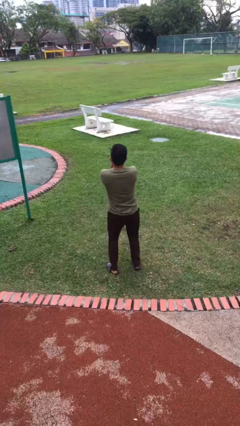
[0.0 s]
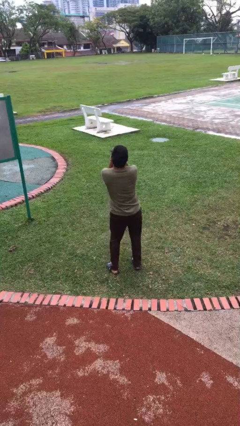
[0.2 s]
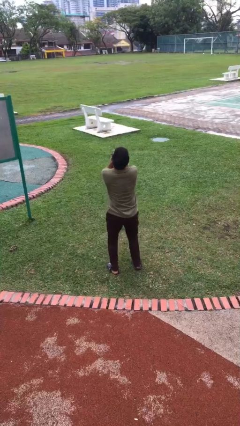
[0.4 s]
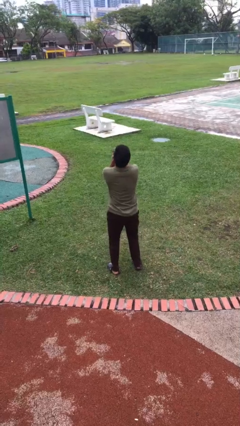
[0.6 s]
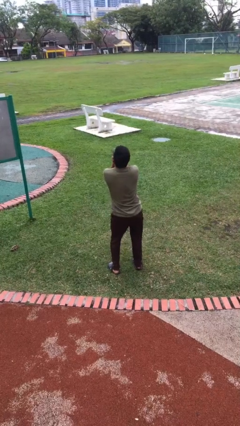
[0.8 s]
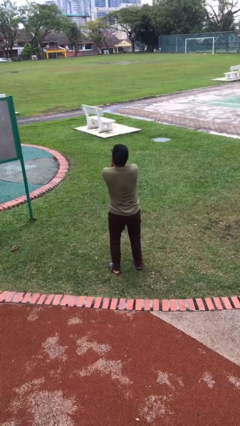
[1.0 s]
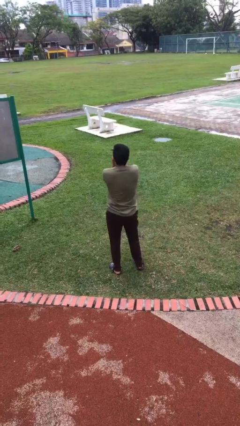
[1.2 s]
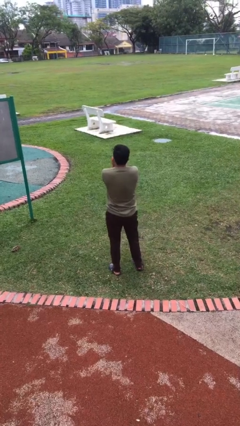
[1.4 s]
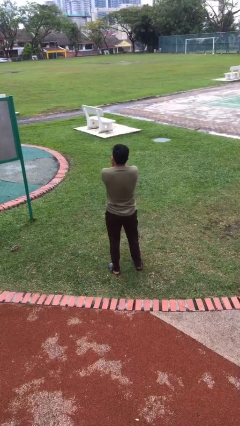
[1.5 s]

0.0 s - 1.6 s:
person wiggles hips

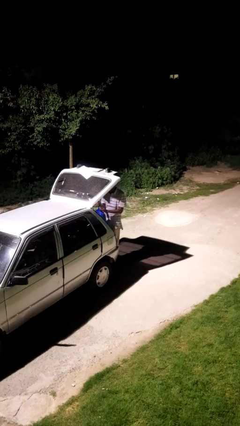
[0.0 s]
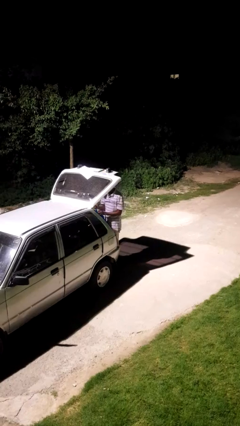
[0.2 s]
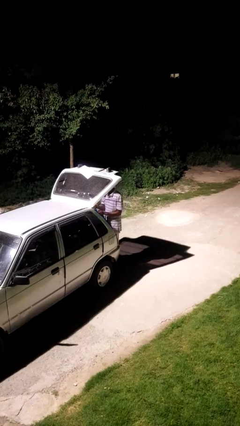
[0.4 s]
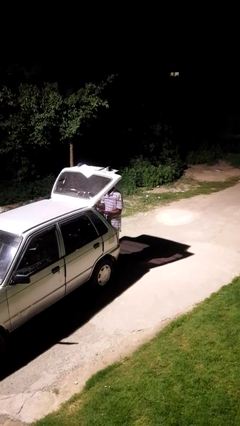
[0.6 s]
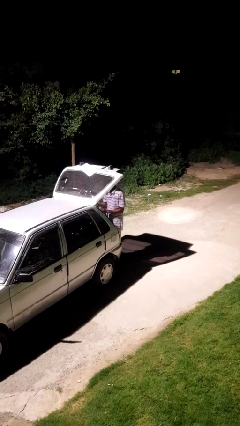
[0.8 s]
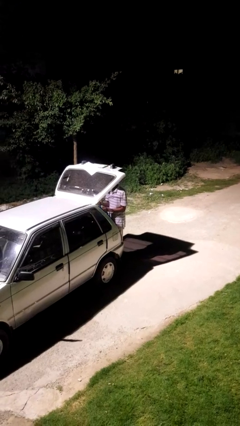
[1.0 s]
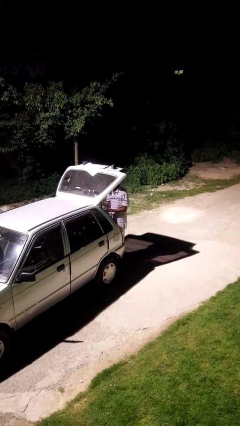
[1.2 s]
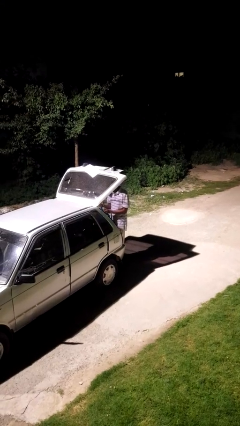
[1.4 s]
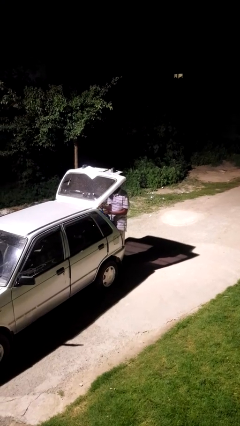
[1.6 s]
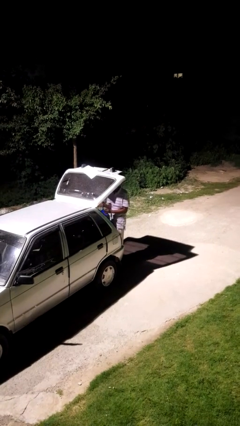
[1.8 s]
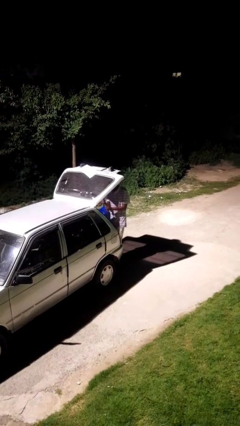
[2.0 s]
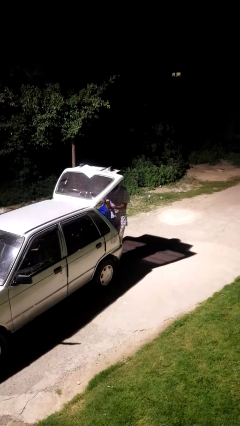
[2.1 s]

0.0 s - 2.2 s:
person loads car

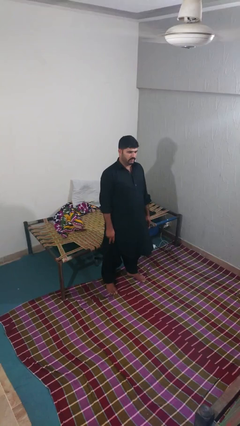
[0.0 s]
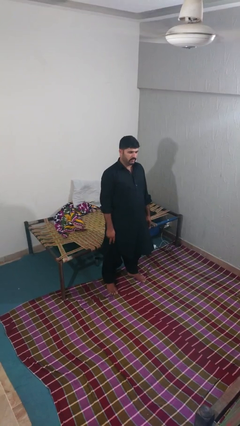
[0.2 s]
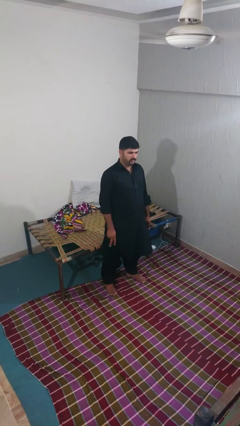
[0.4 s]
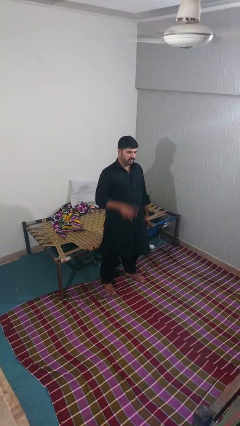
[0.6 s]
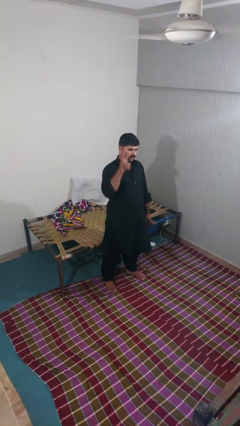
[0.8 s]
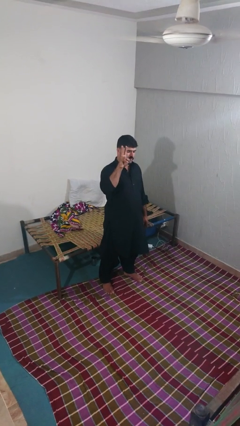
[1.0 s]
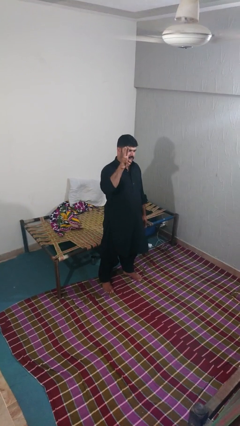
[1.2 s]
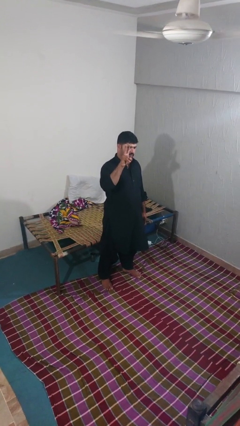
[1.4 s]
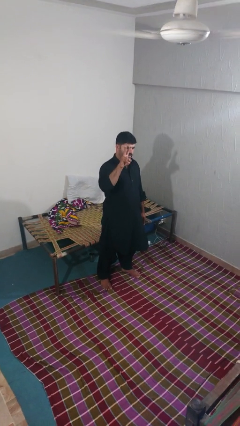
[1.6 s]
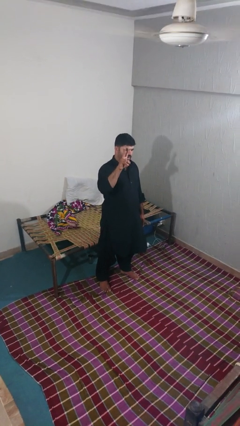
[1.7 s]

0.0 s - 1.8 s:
person gestures peace

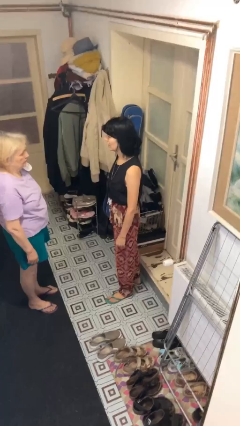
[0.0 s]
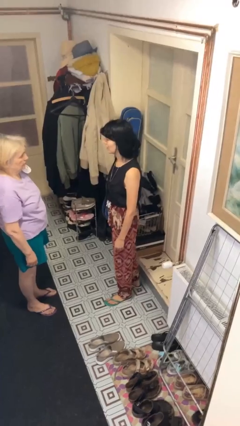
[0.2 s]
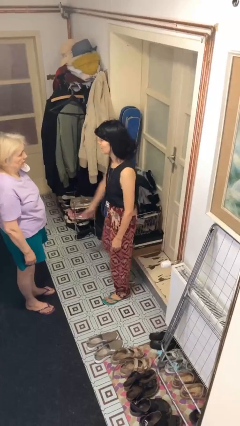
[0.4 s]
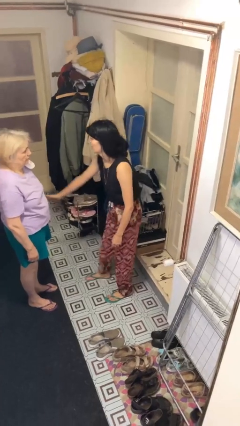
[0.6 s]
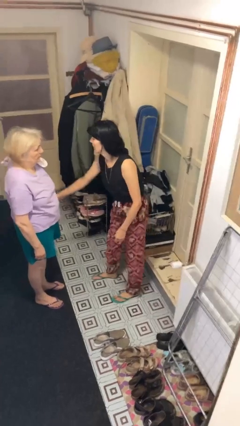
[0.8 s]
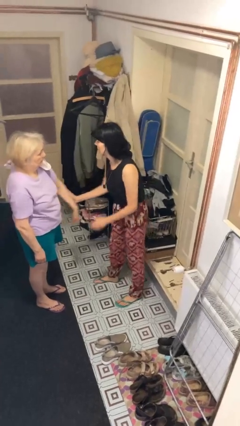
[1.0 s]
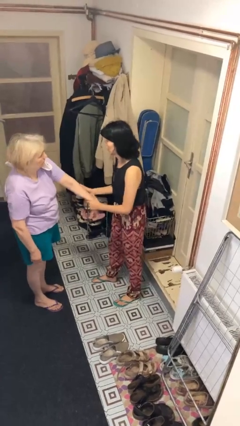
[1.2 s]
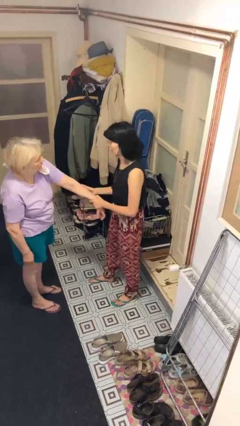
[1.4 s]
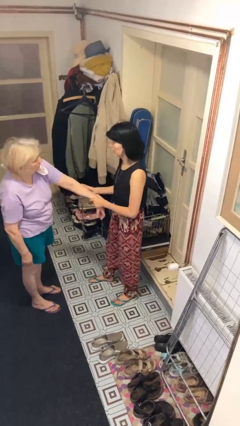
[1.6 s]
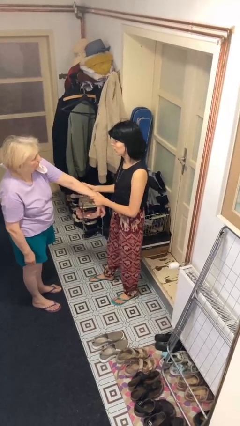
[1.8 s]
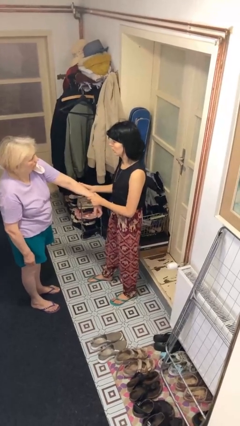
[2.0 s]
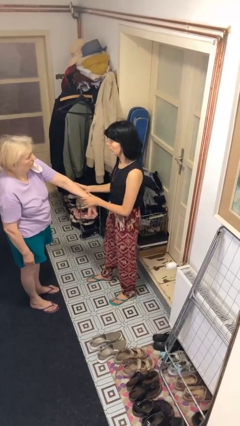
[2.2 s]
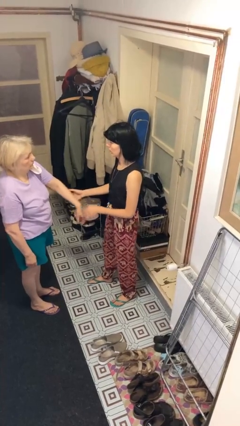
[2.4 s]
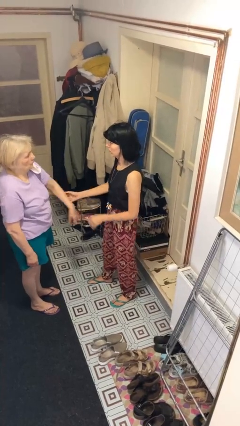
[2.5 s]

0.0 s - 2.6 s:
person grabs person by forearm

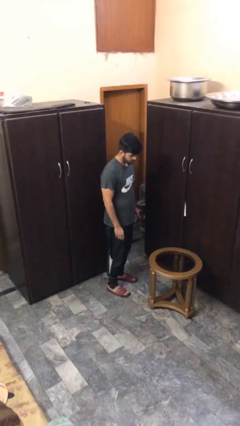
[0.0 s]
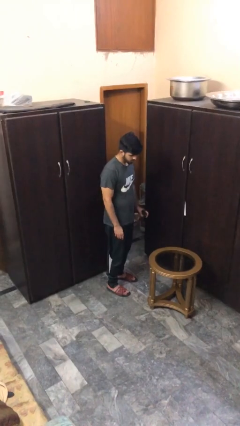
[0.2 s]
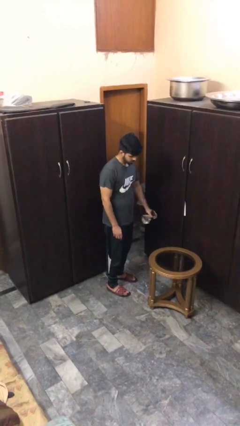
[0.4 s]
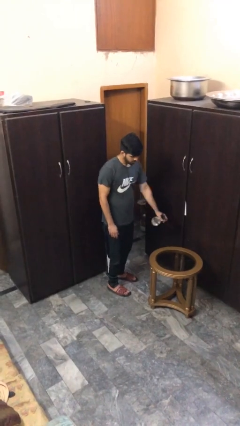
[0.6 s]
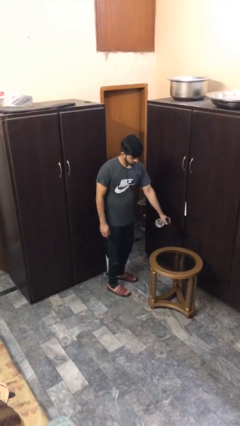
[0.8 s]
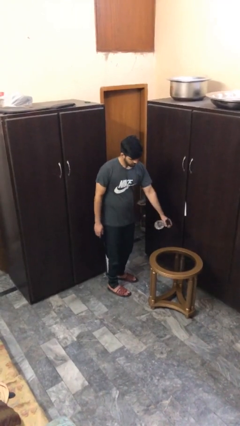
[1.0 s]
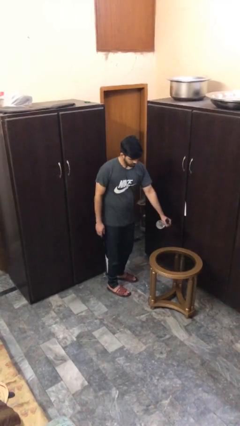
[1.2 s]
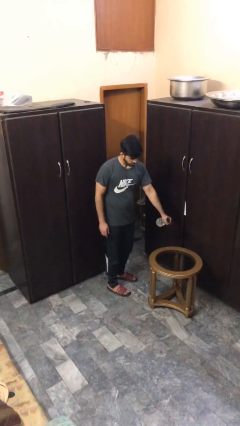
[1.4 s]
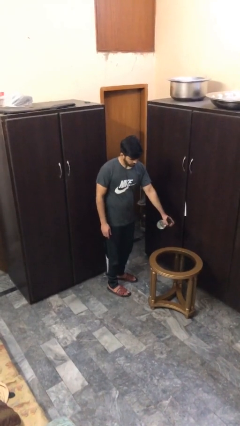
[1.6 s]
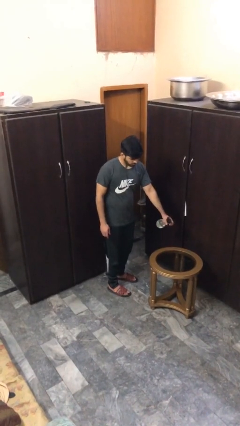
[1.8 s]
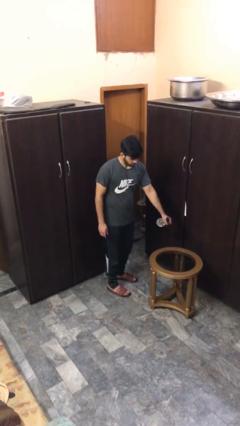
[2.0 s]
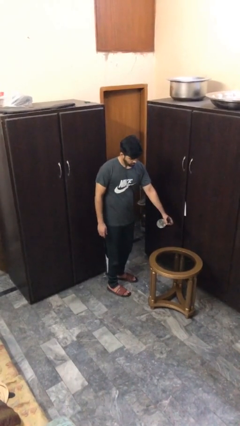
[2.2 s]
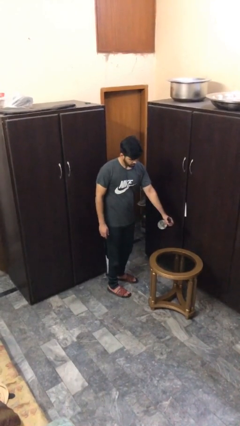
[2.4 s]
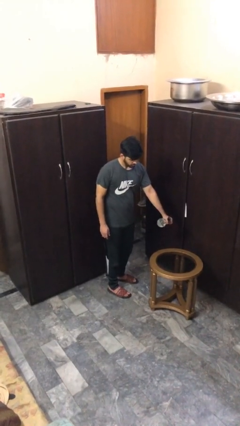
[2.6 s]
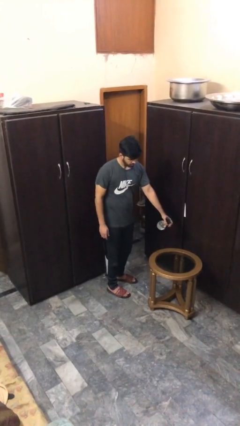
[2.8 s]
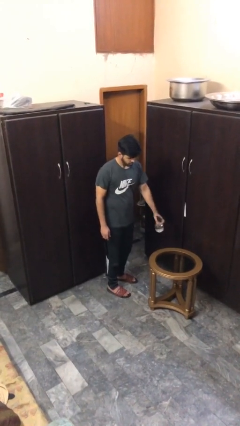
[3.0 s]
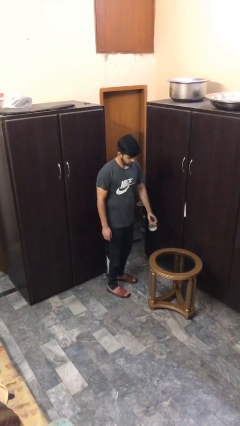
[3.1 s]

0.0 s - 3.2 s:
person sprays from bottle

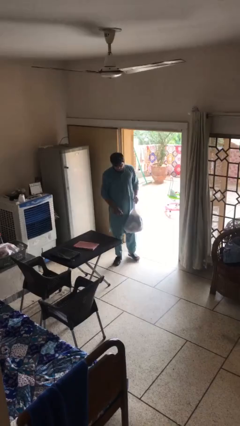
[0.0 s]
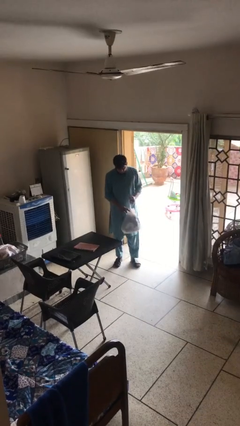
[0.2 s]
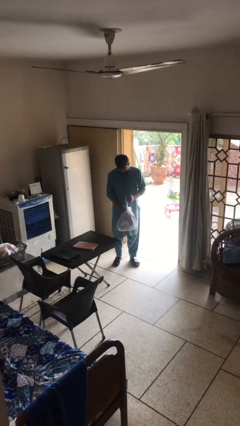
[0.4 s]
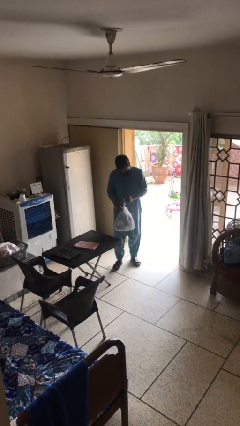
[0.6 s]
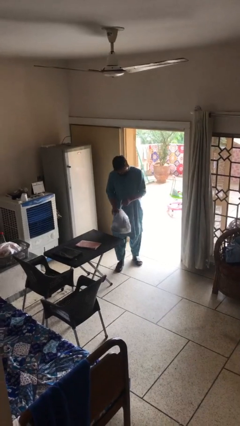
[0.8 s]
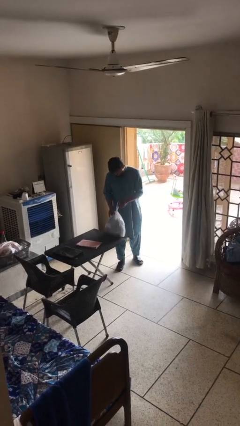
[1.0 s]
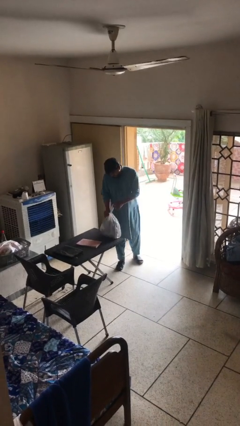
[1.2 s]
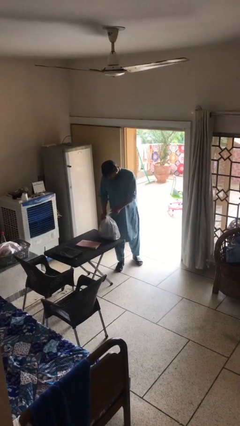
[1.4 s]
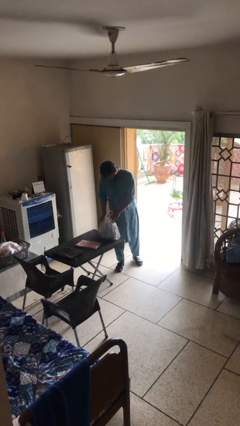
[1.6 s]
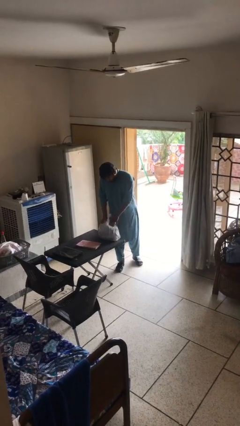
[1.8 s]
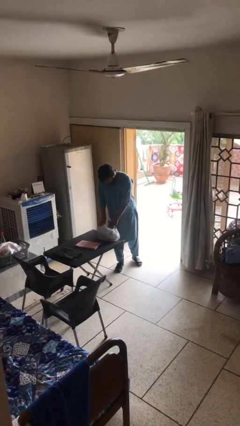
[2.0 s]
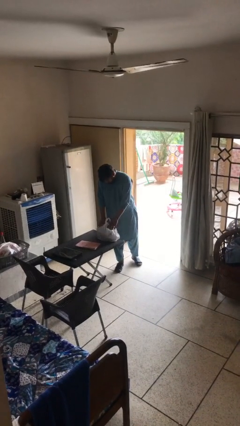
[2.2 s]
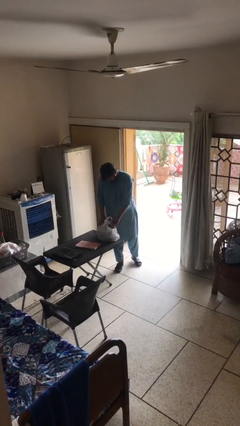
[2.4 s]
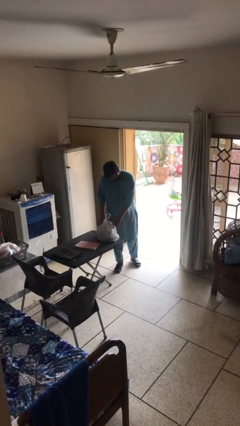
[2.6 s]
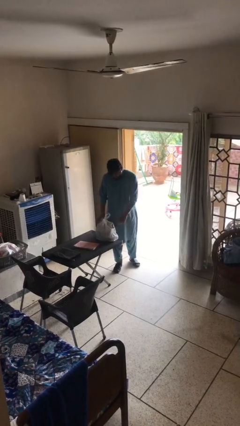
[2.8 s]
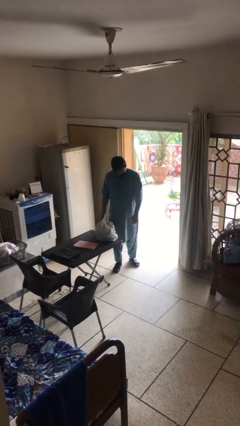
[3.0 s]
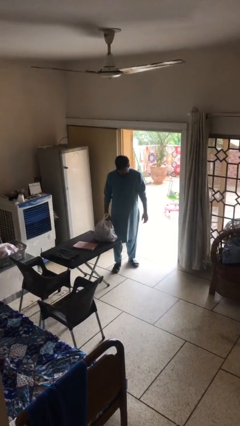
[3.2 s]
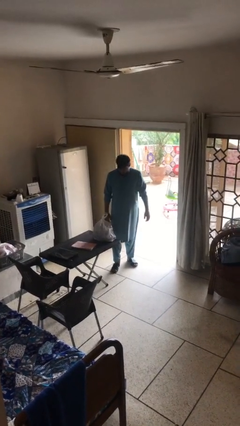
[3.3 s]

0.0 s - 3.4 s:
person puts down object on table

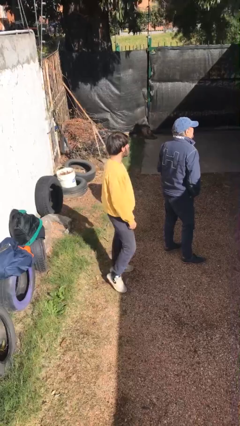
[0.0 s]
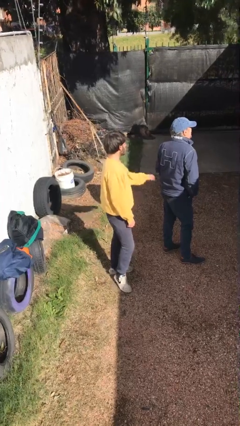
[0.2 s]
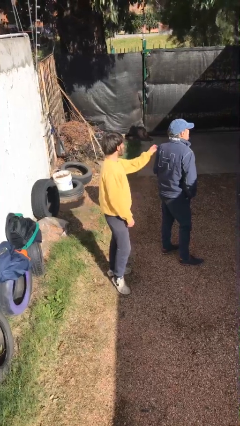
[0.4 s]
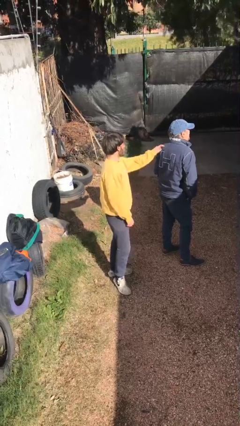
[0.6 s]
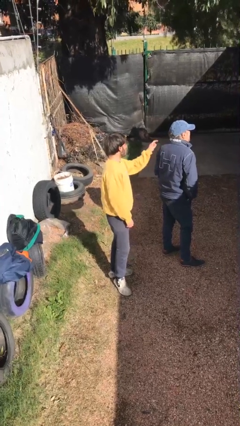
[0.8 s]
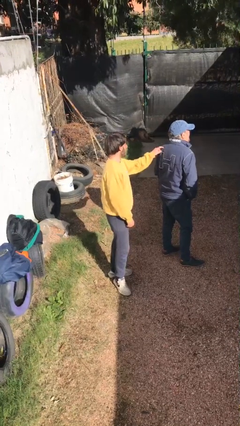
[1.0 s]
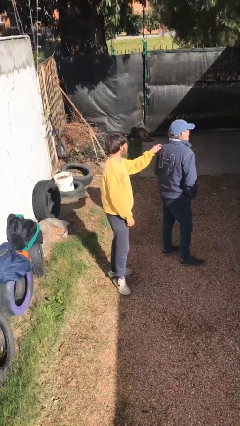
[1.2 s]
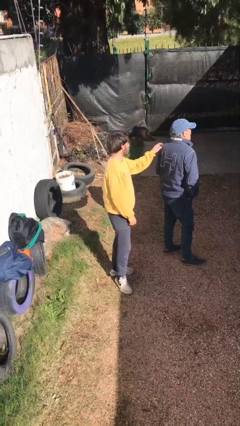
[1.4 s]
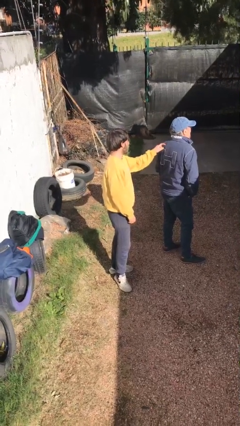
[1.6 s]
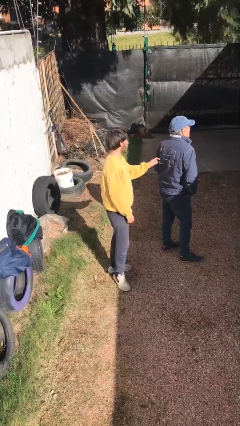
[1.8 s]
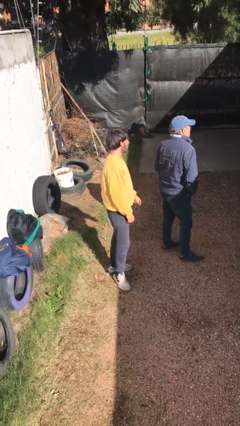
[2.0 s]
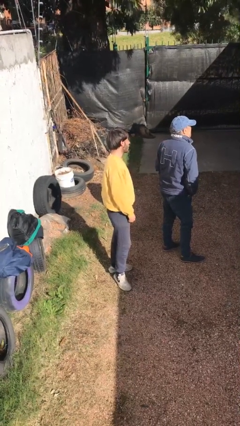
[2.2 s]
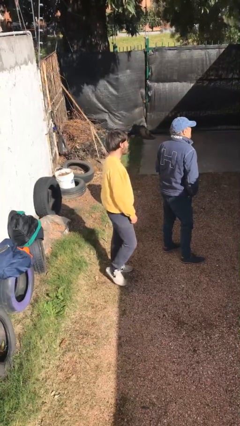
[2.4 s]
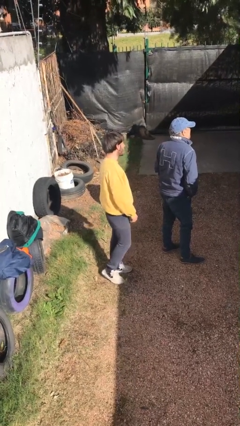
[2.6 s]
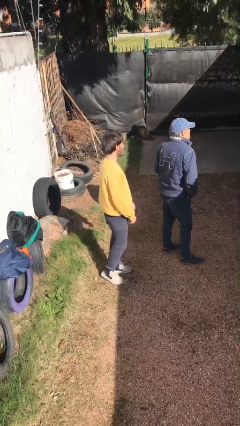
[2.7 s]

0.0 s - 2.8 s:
person touches back of person
